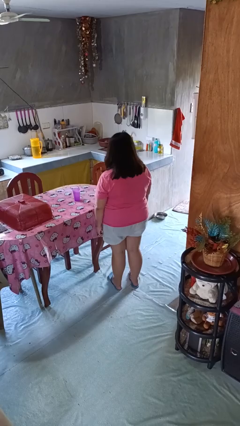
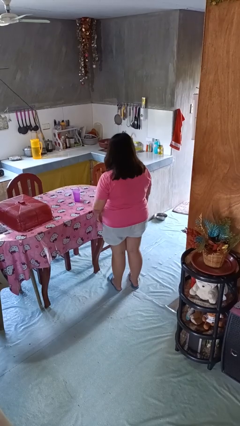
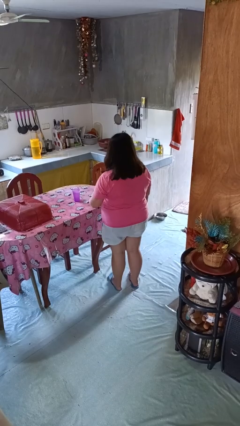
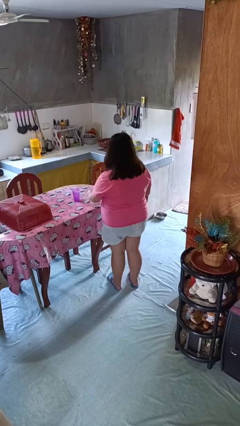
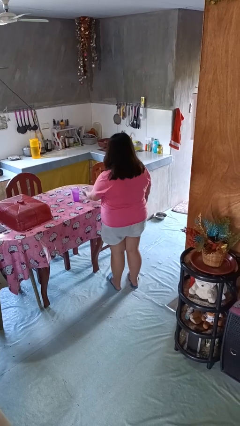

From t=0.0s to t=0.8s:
person knocks over glass

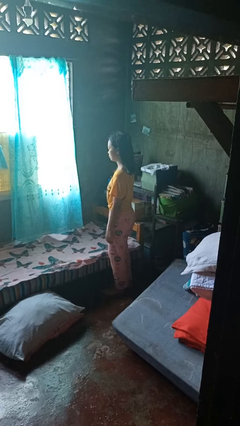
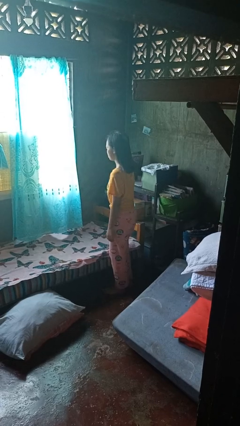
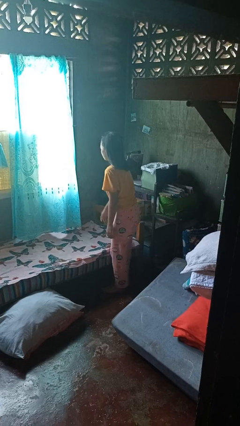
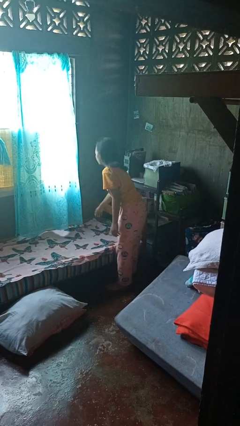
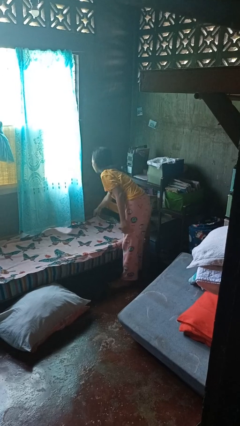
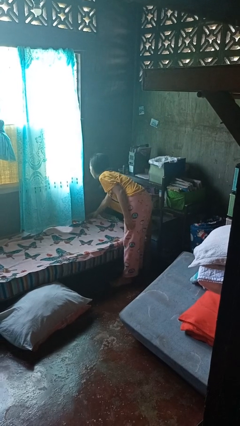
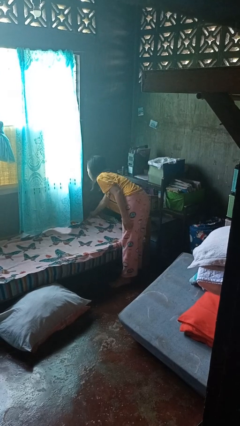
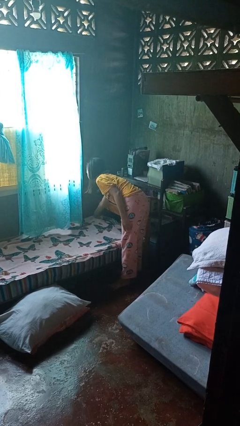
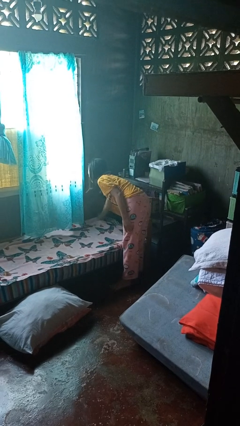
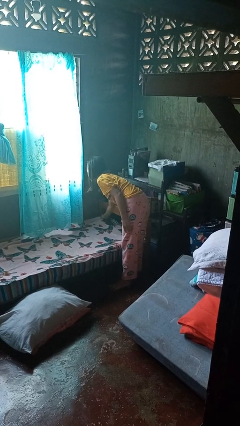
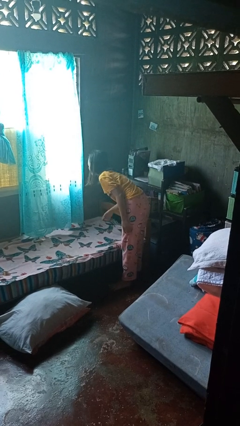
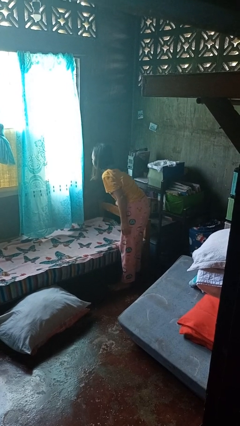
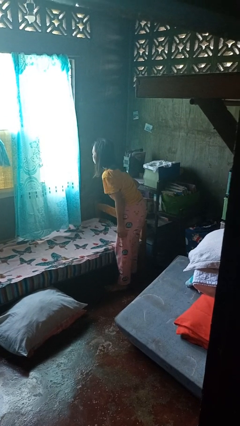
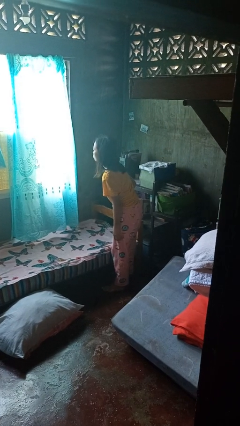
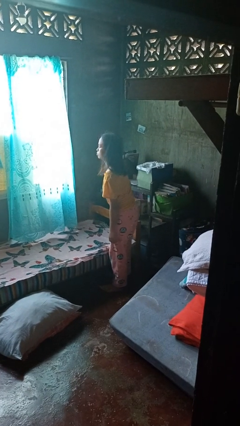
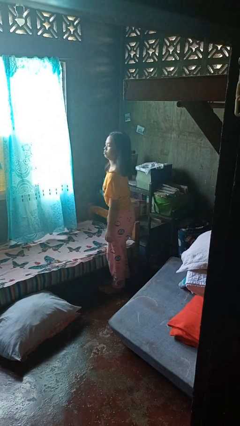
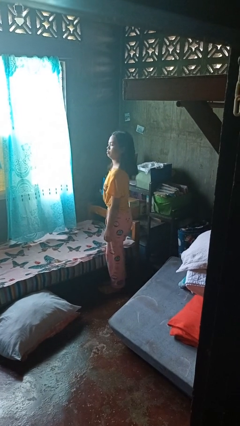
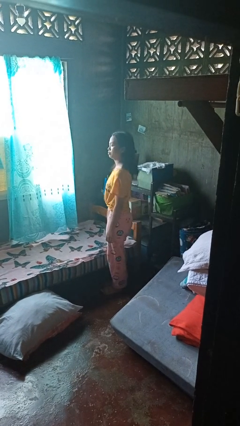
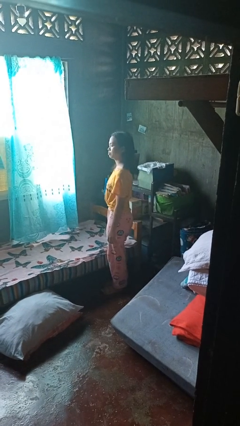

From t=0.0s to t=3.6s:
person makes bed

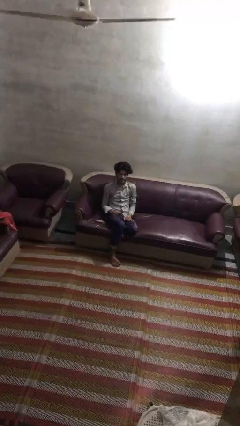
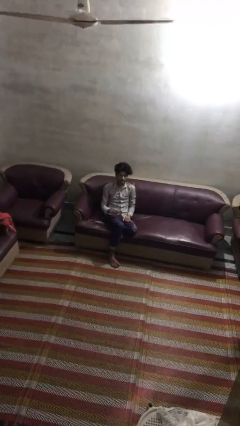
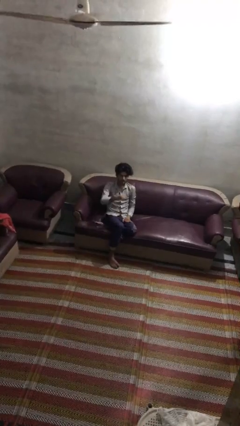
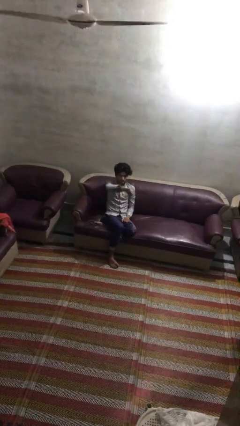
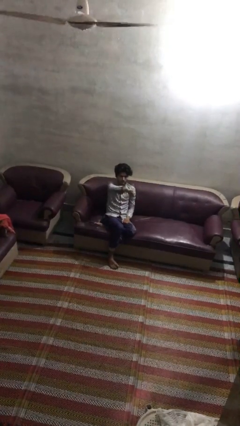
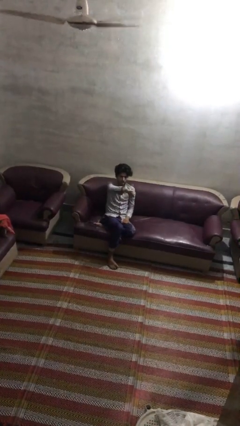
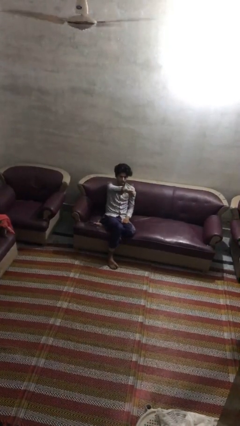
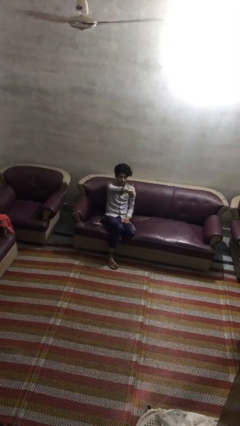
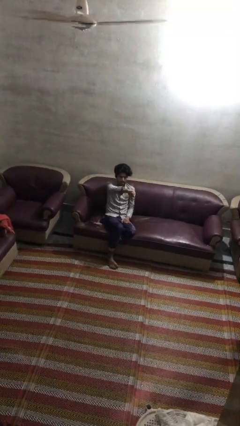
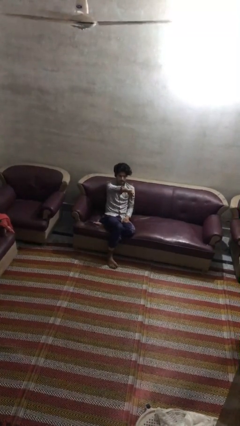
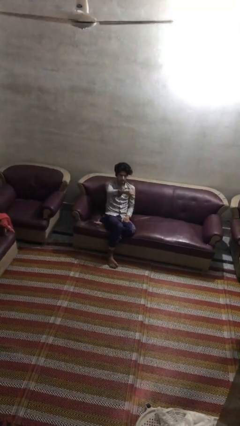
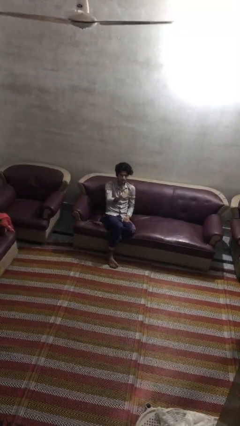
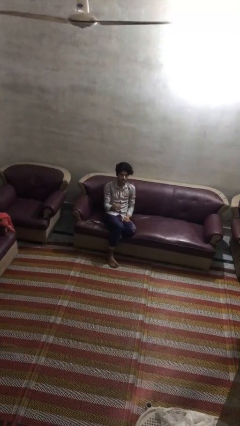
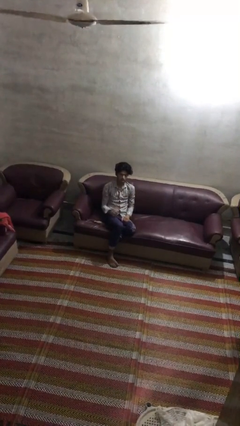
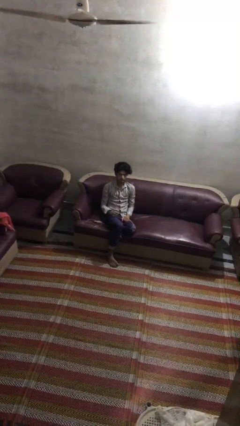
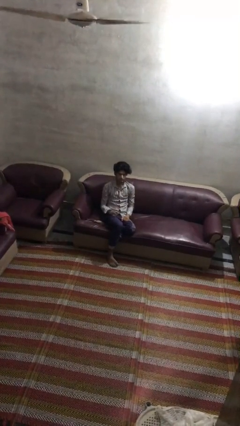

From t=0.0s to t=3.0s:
person gestures thumbs down

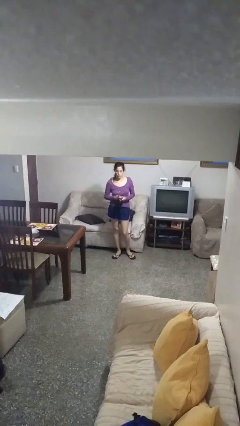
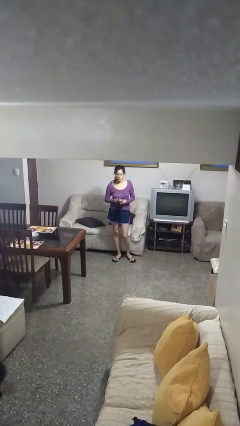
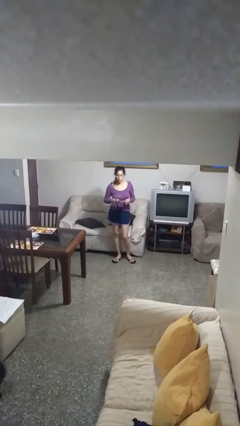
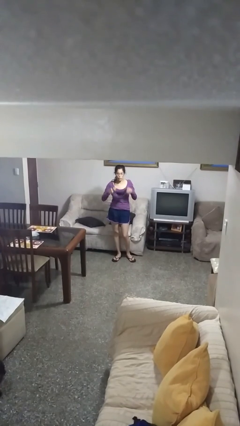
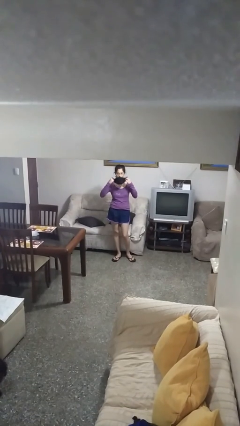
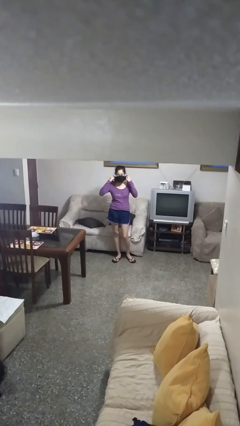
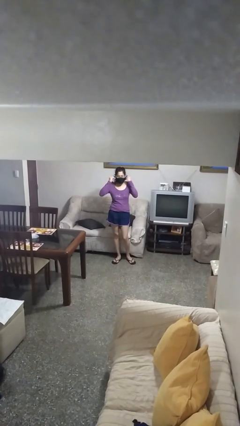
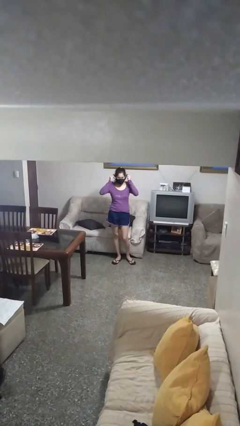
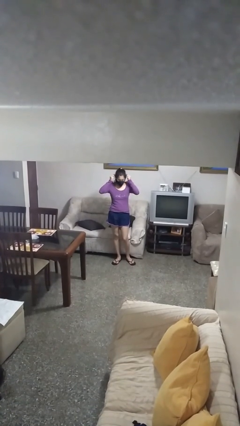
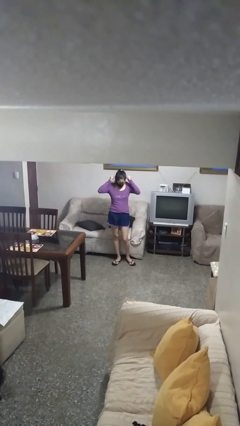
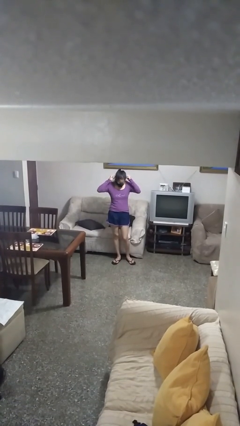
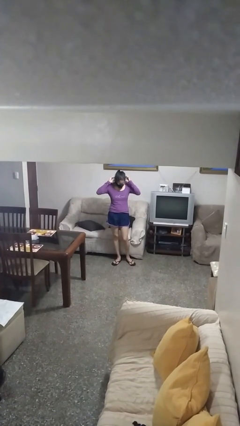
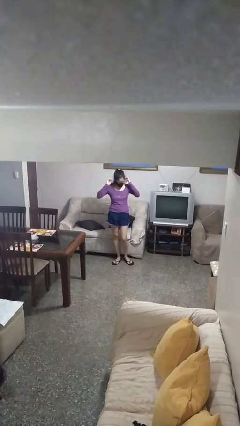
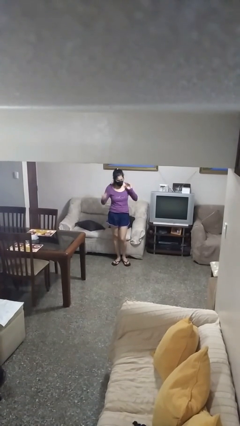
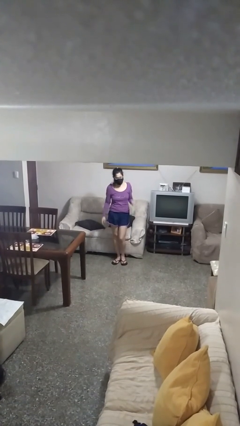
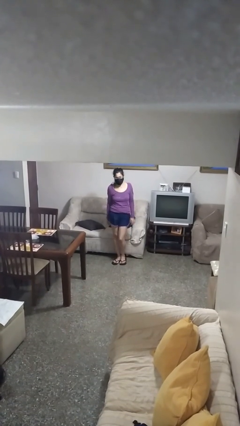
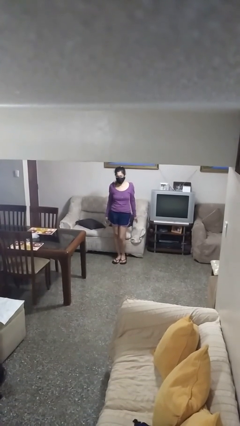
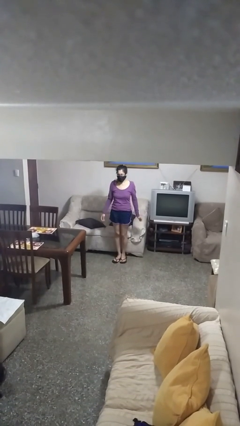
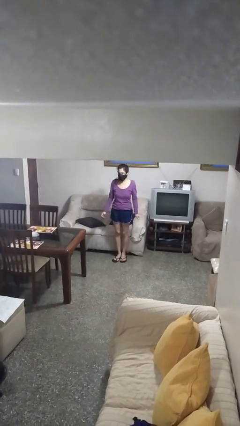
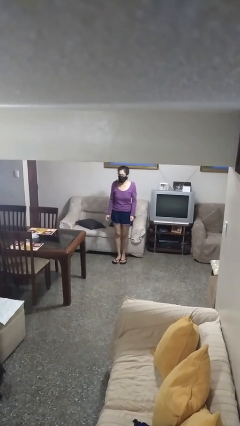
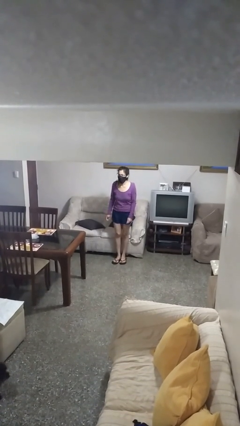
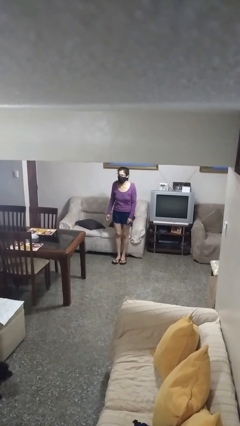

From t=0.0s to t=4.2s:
person puts on facemask

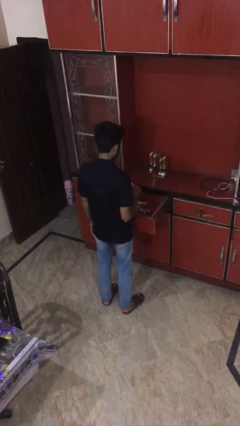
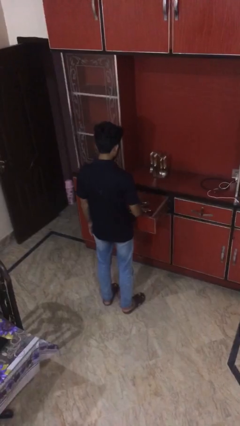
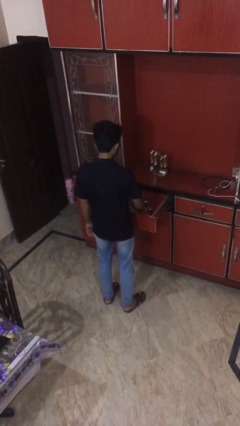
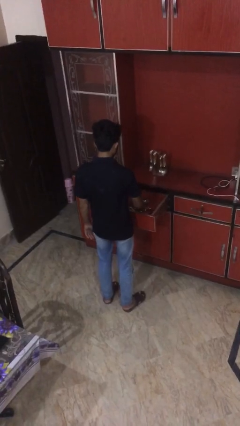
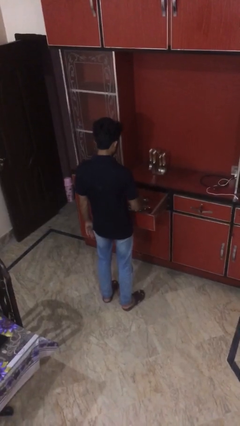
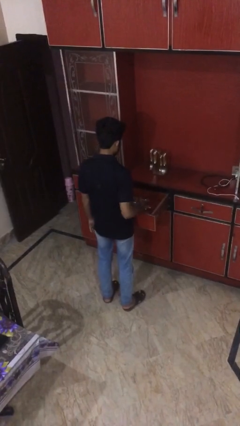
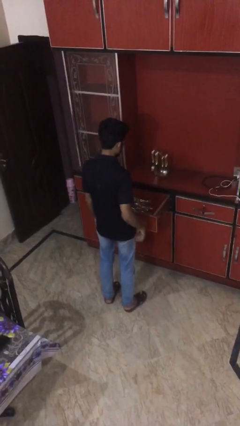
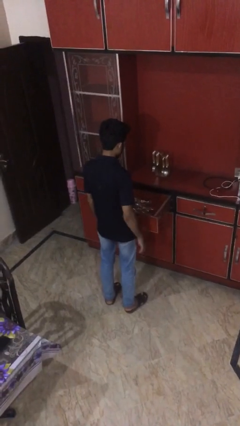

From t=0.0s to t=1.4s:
person puts object into kitchen drawer

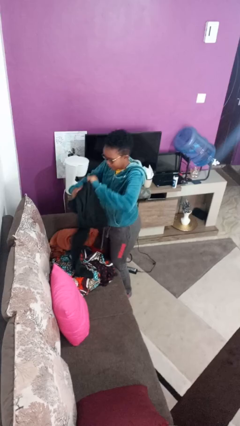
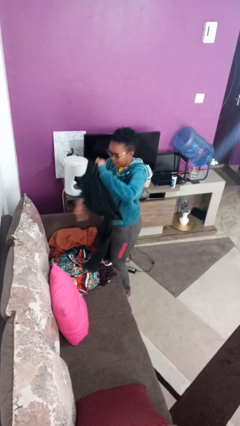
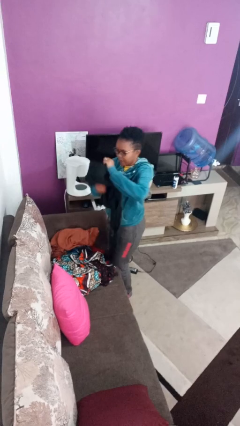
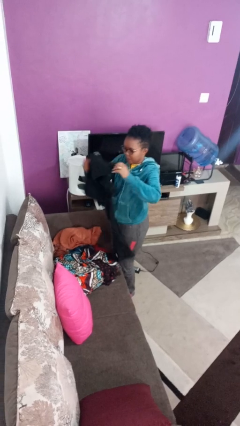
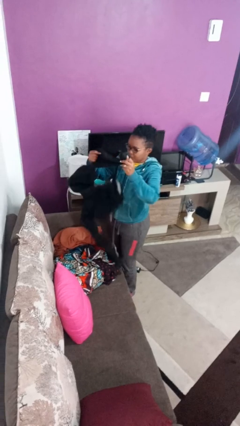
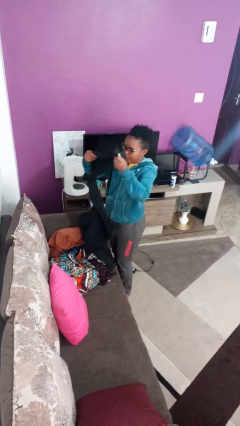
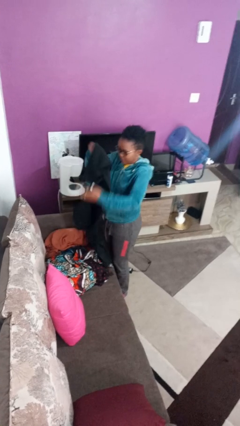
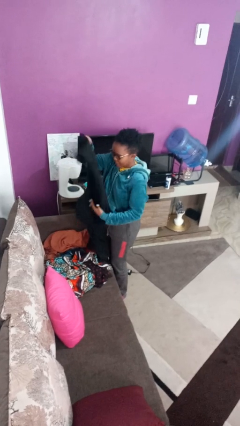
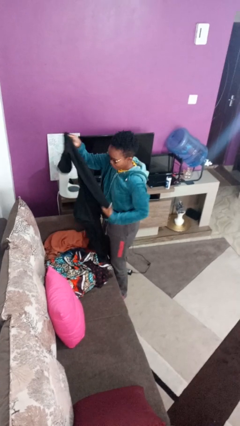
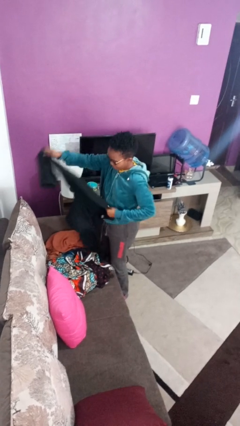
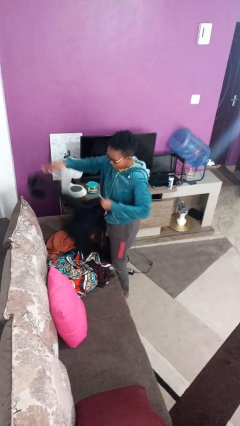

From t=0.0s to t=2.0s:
person folds pants

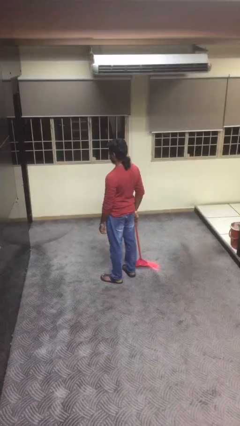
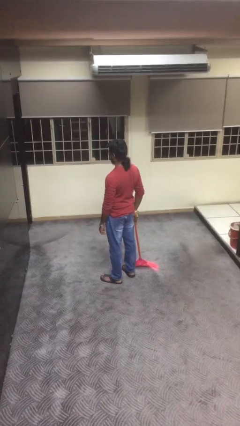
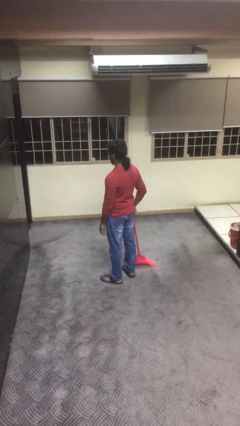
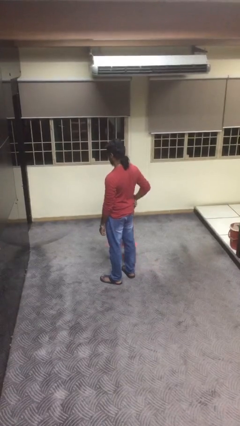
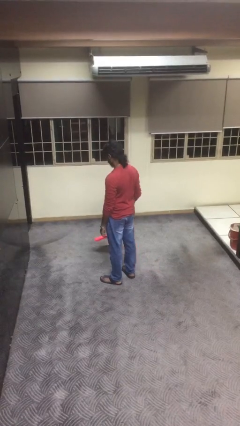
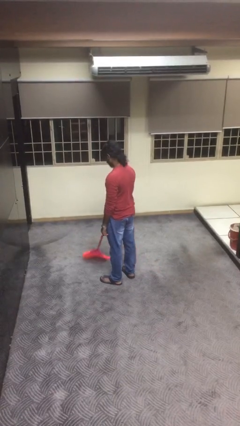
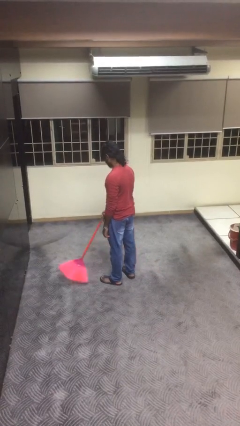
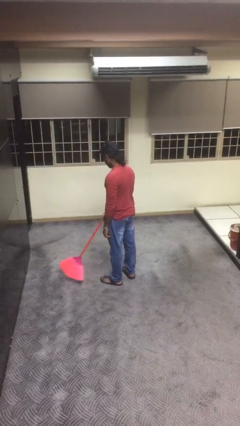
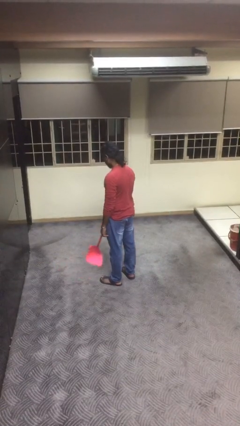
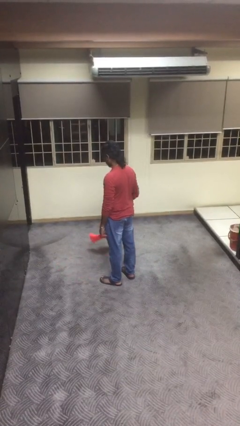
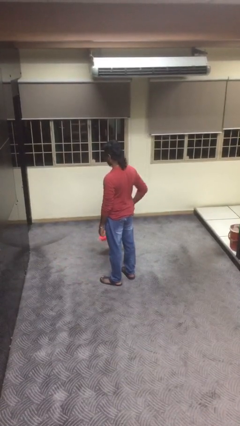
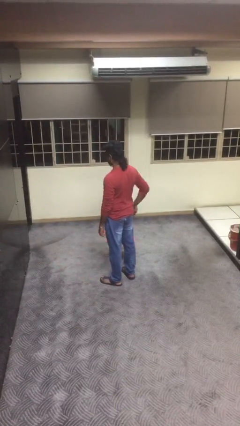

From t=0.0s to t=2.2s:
person sweeps floor

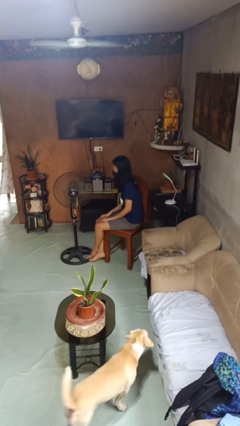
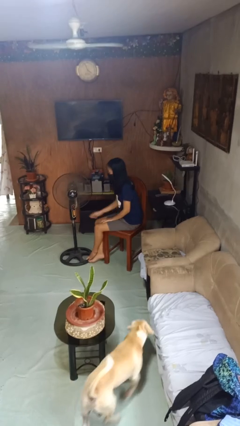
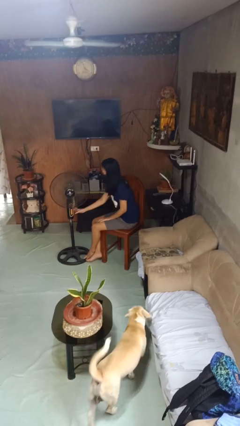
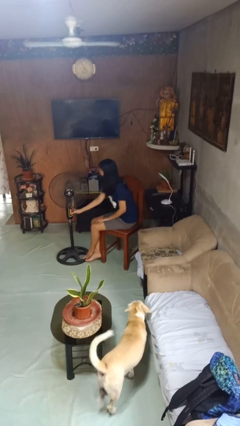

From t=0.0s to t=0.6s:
person turns on fan
